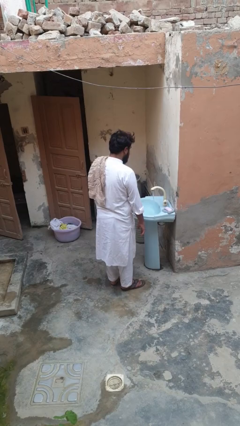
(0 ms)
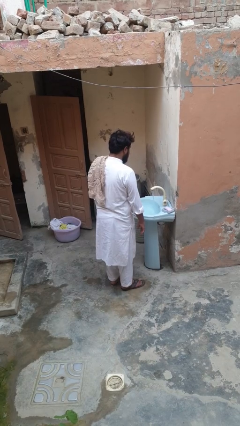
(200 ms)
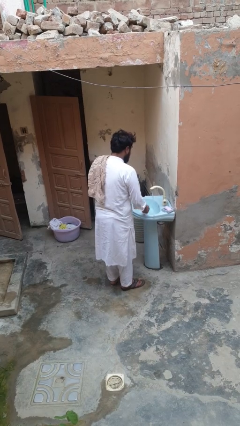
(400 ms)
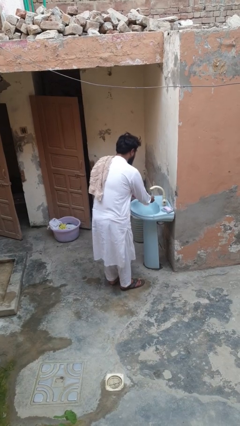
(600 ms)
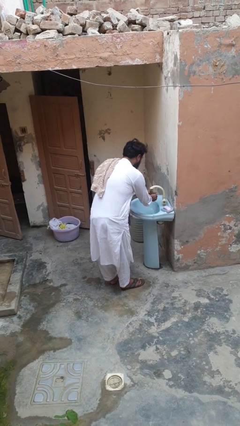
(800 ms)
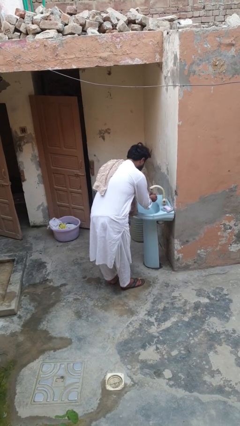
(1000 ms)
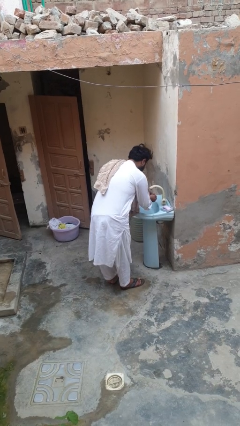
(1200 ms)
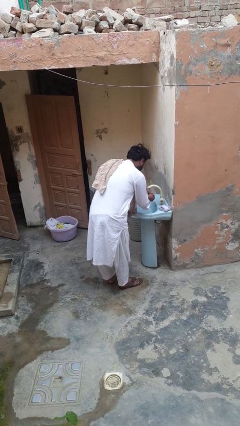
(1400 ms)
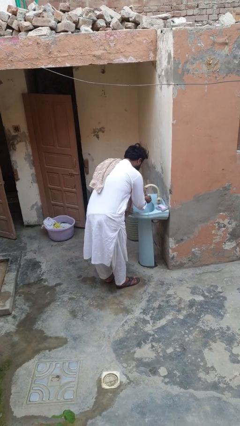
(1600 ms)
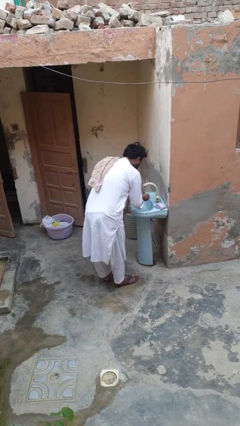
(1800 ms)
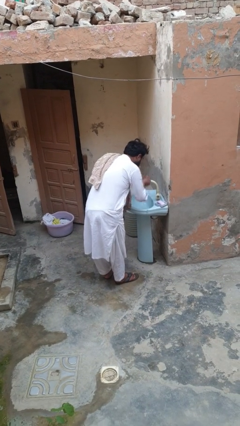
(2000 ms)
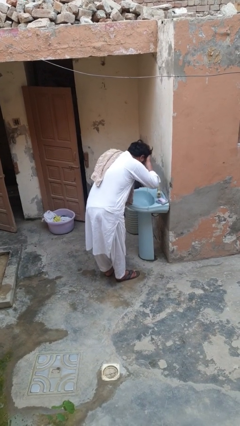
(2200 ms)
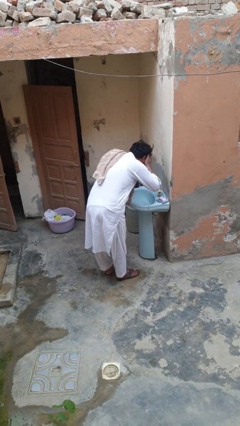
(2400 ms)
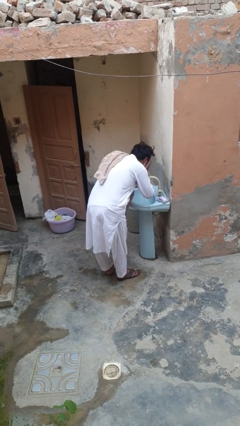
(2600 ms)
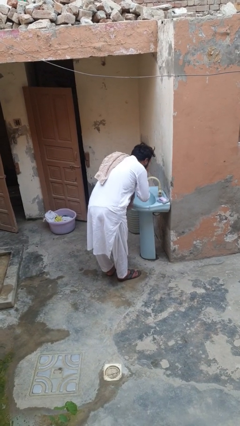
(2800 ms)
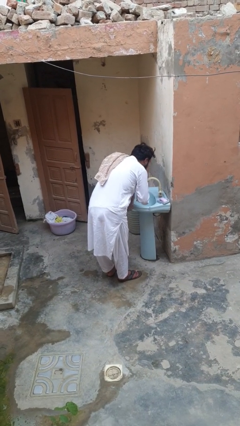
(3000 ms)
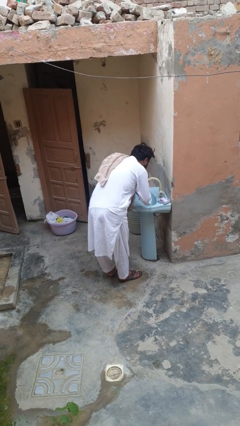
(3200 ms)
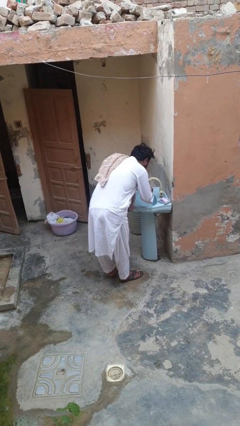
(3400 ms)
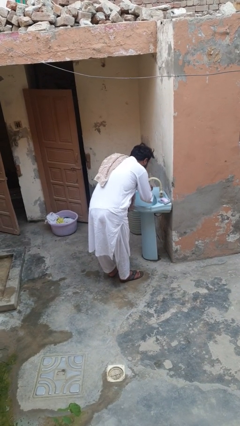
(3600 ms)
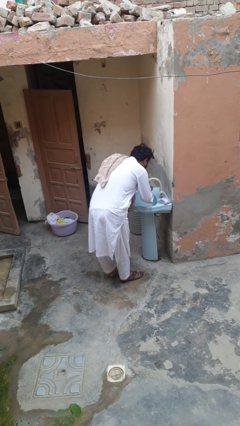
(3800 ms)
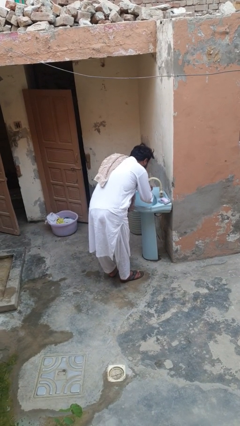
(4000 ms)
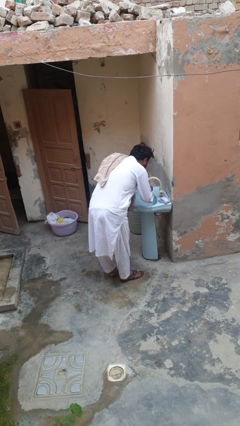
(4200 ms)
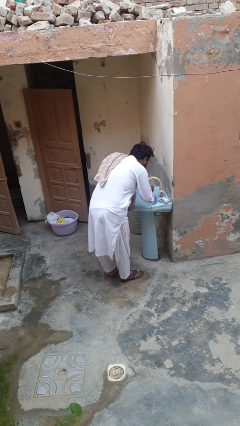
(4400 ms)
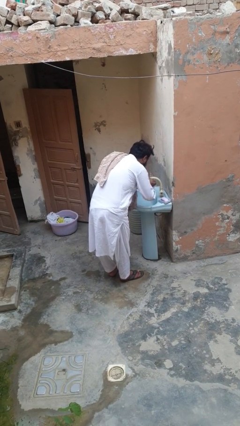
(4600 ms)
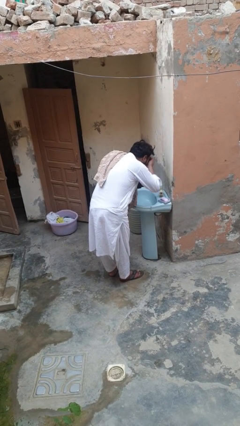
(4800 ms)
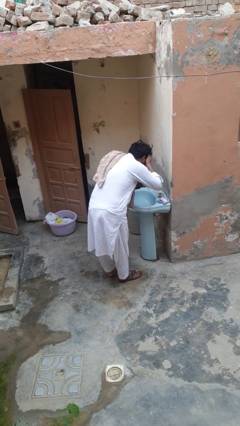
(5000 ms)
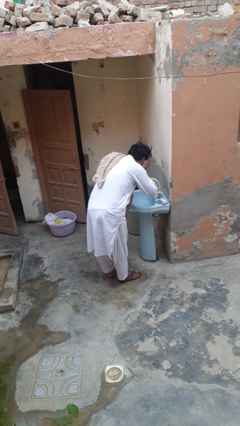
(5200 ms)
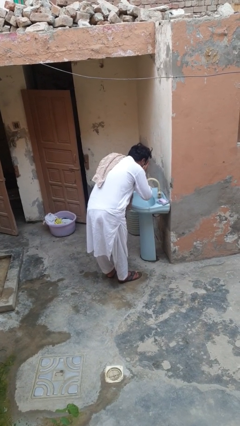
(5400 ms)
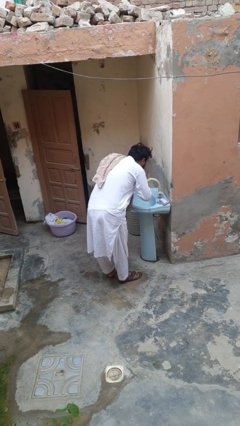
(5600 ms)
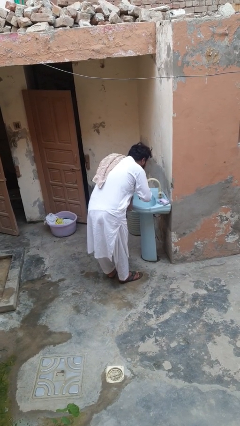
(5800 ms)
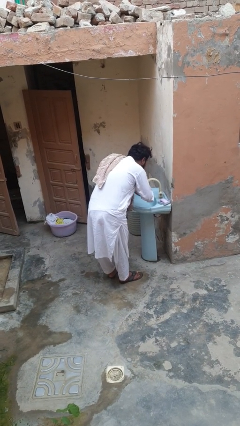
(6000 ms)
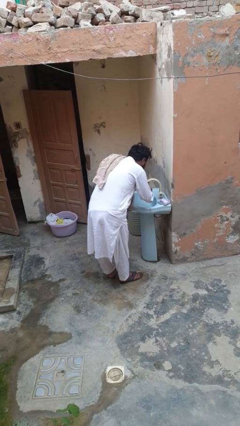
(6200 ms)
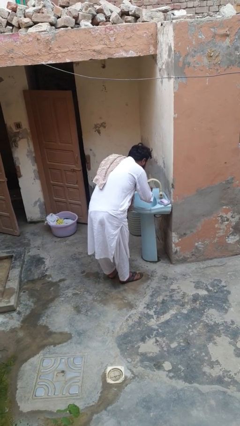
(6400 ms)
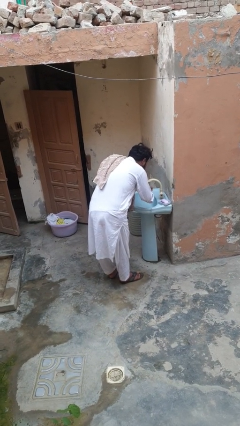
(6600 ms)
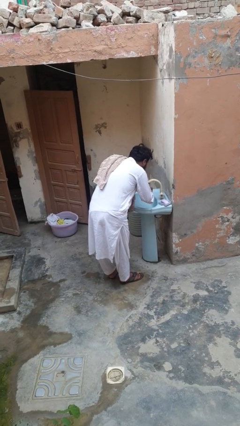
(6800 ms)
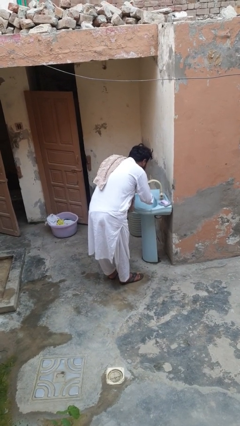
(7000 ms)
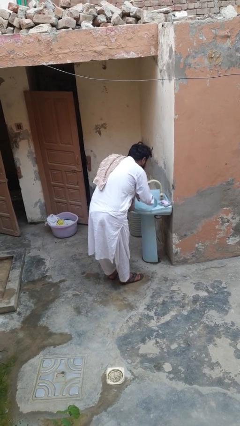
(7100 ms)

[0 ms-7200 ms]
person washes face

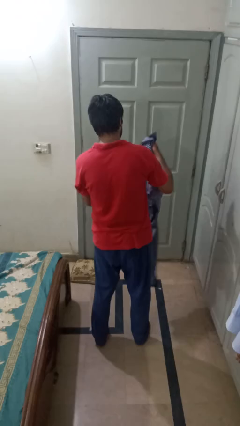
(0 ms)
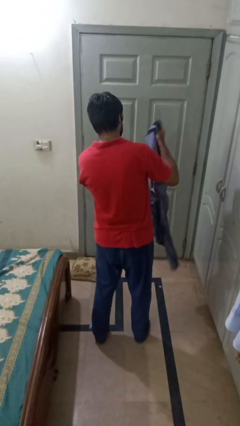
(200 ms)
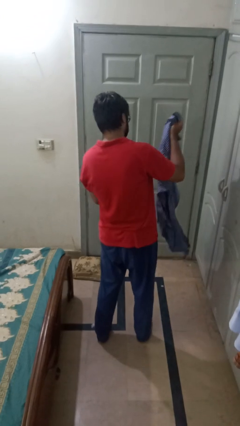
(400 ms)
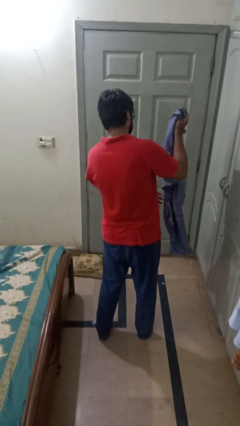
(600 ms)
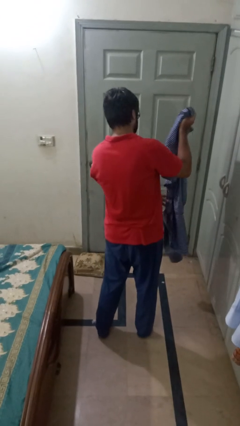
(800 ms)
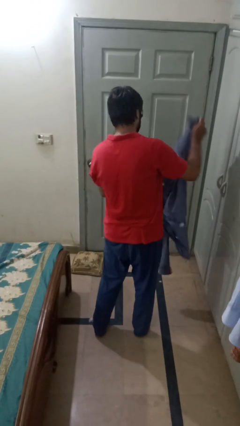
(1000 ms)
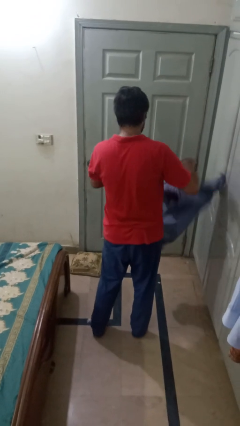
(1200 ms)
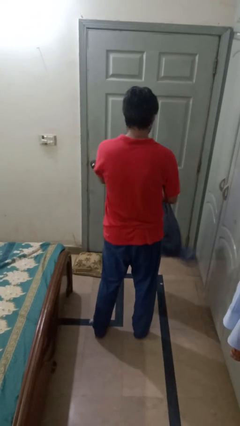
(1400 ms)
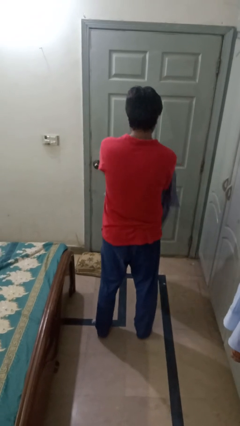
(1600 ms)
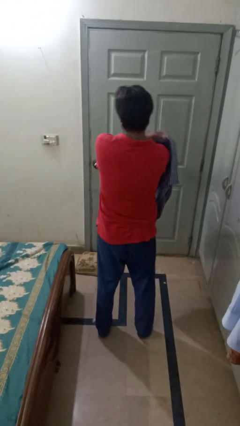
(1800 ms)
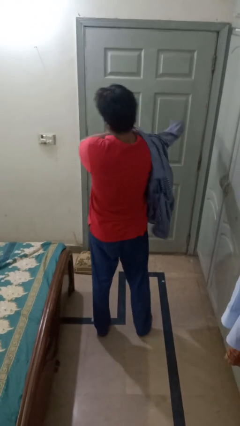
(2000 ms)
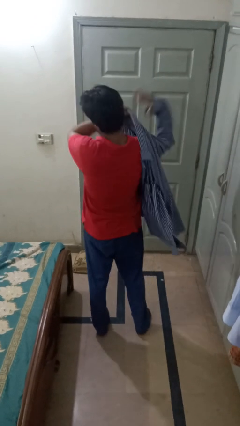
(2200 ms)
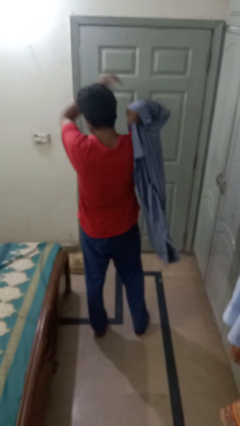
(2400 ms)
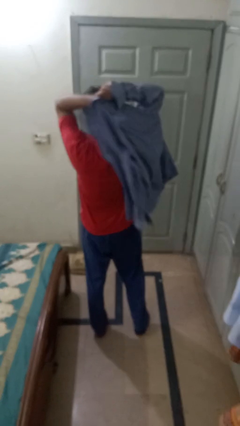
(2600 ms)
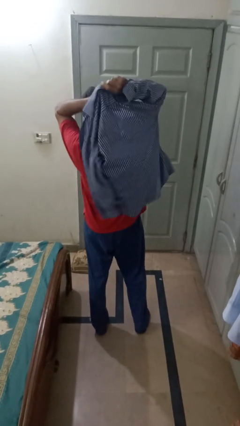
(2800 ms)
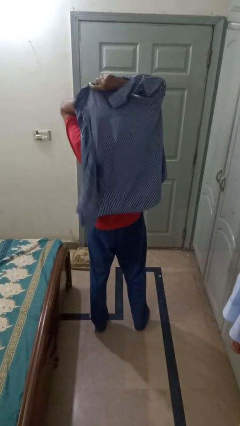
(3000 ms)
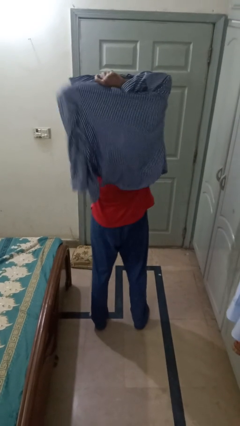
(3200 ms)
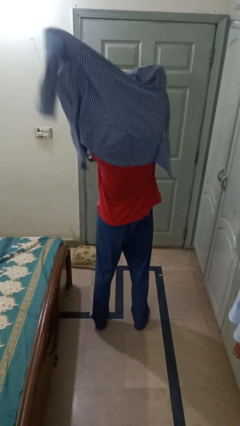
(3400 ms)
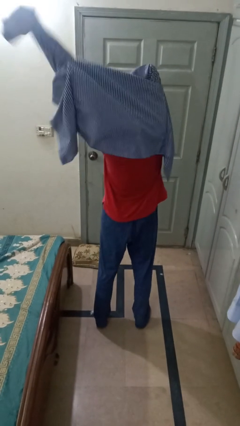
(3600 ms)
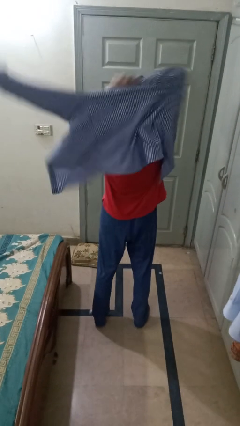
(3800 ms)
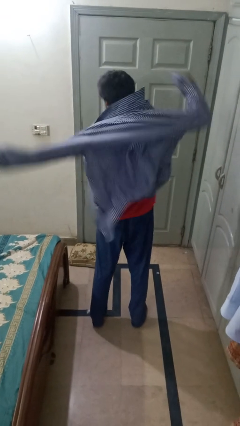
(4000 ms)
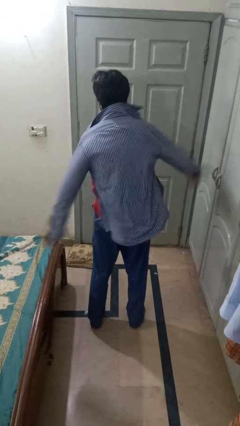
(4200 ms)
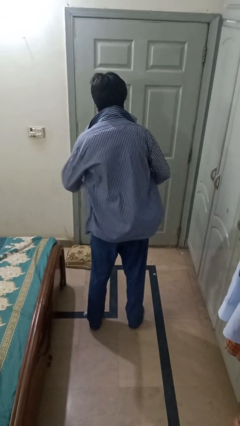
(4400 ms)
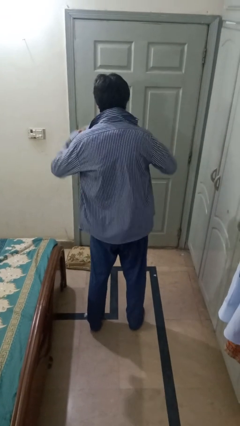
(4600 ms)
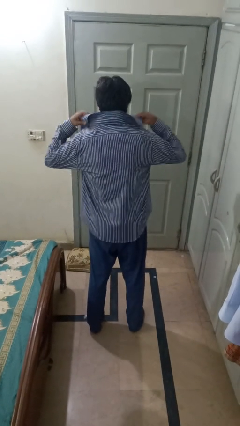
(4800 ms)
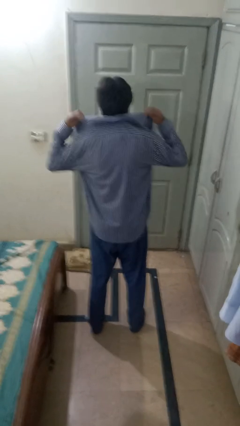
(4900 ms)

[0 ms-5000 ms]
person puts on shirt

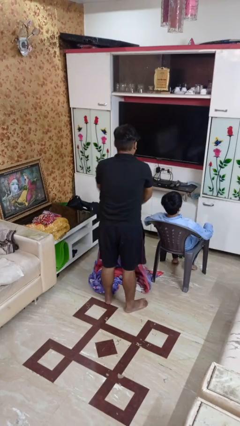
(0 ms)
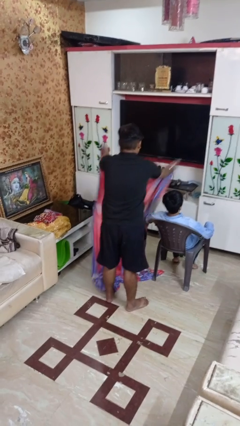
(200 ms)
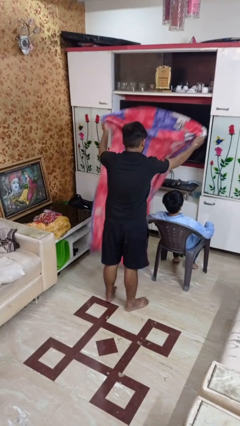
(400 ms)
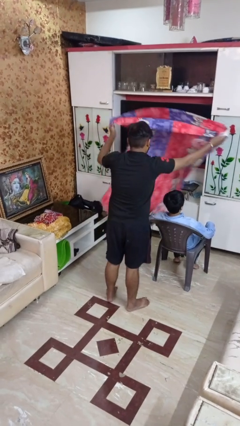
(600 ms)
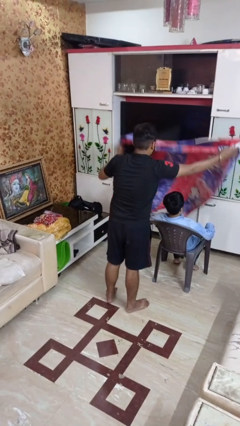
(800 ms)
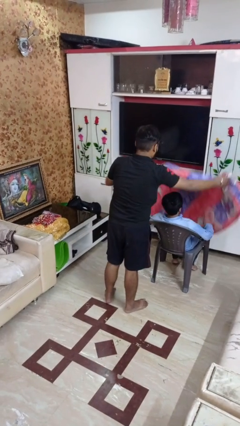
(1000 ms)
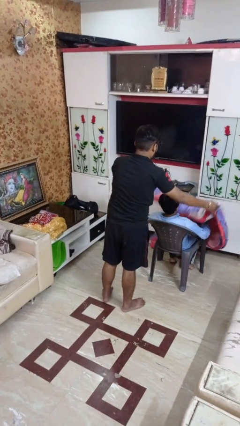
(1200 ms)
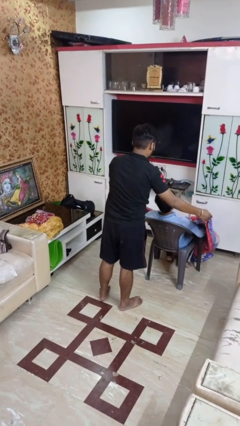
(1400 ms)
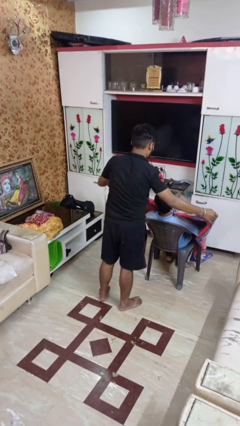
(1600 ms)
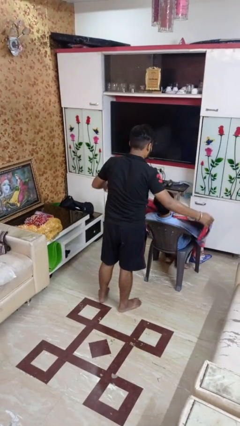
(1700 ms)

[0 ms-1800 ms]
person covers friend with blanket

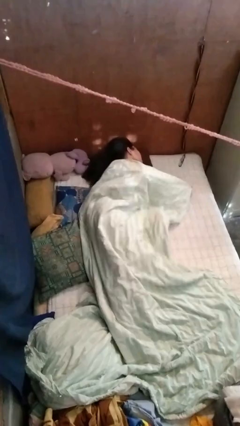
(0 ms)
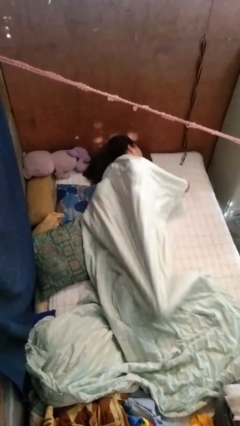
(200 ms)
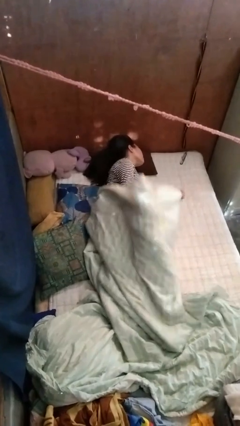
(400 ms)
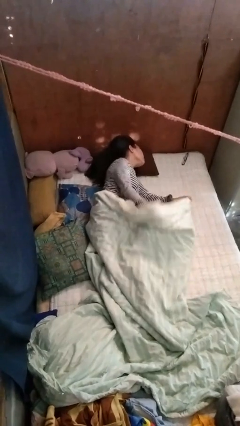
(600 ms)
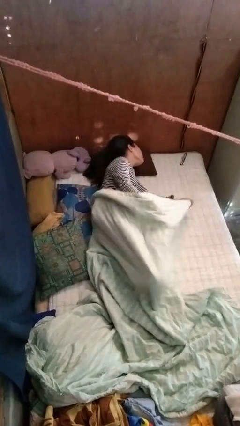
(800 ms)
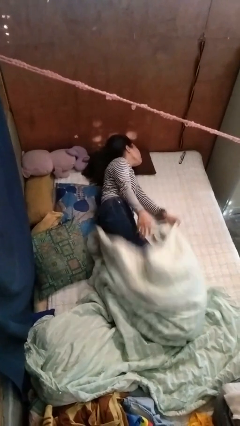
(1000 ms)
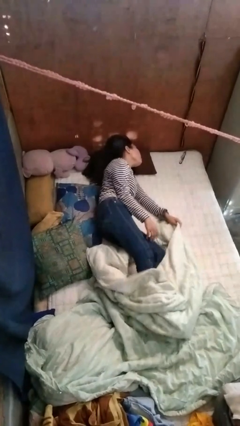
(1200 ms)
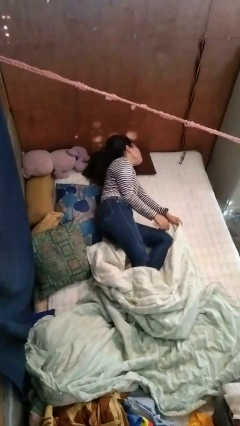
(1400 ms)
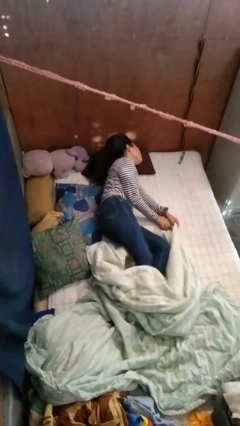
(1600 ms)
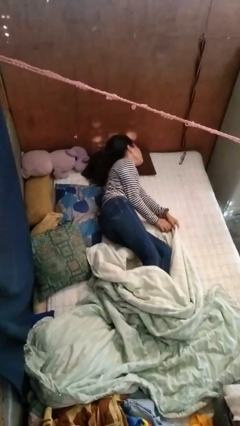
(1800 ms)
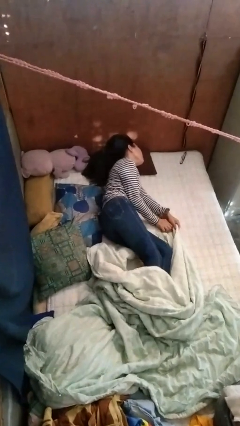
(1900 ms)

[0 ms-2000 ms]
person uncovers with bedsheets

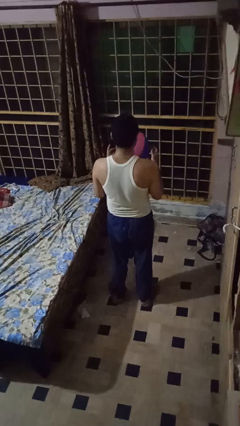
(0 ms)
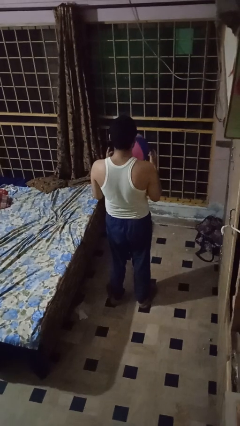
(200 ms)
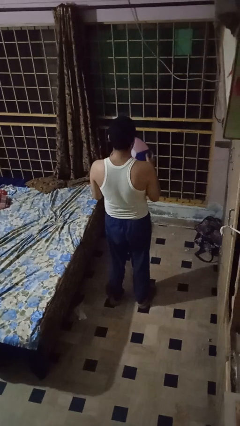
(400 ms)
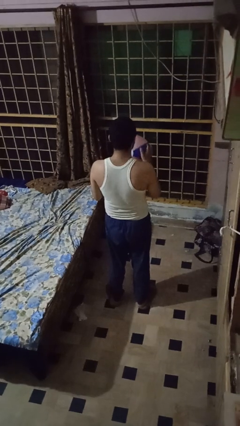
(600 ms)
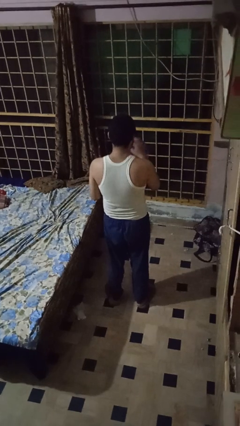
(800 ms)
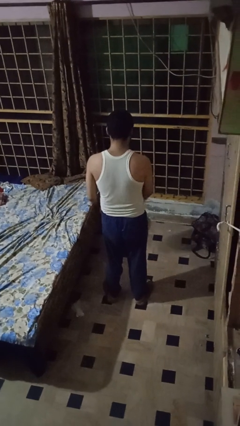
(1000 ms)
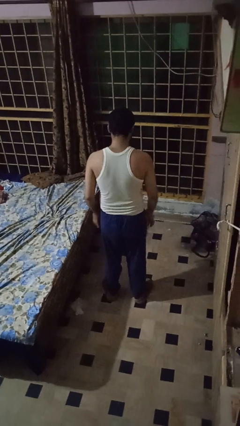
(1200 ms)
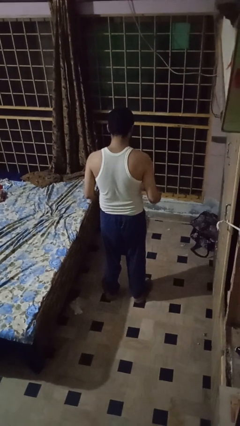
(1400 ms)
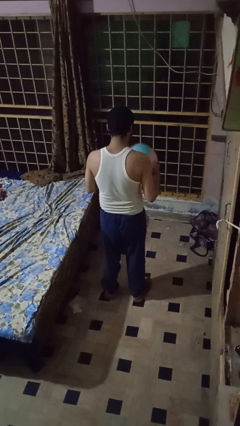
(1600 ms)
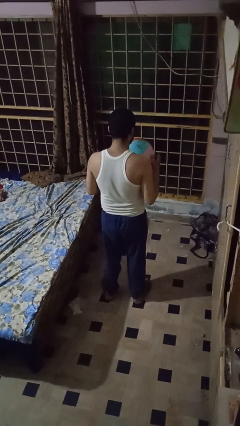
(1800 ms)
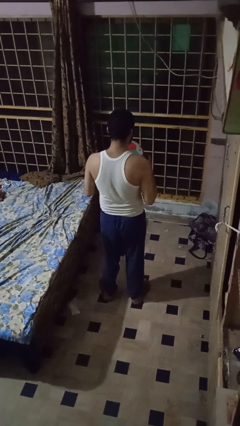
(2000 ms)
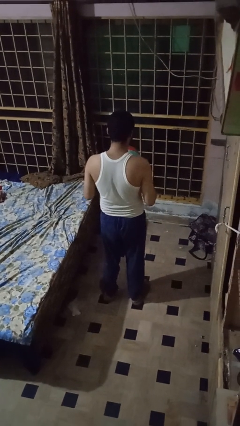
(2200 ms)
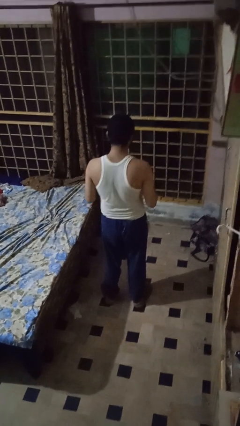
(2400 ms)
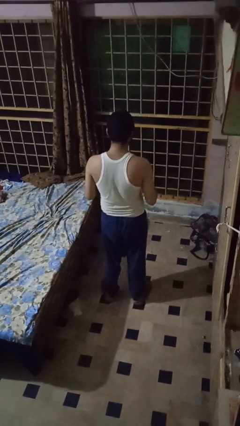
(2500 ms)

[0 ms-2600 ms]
person bounces ball on floor
